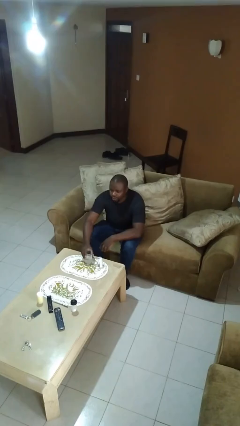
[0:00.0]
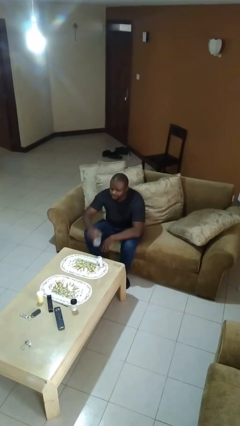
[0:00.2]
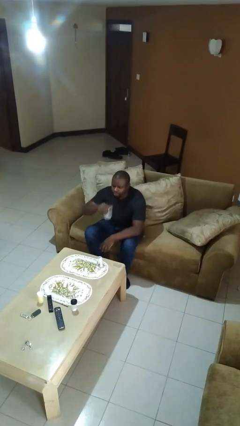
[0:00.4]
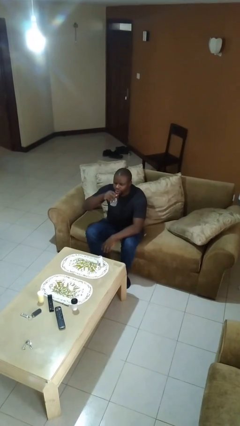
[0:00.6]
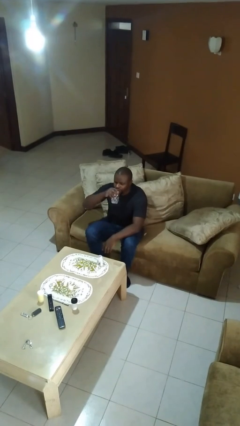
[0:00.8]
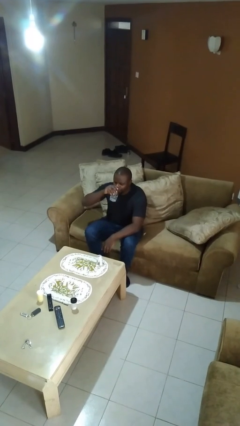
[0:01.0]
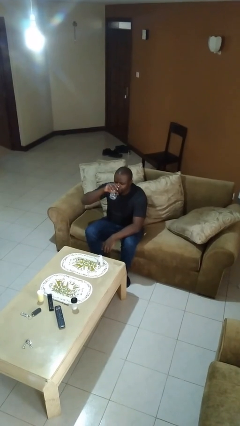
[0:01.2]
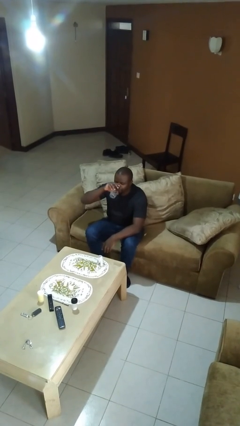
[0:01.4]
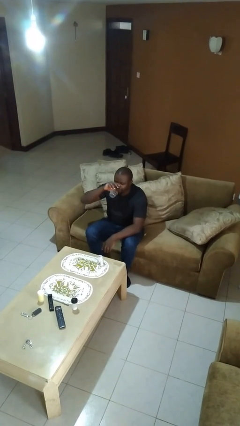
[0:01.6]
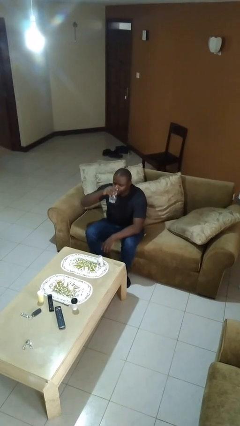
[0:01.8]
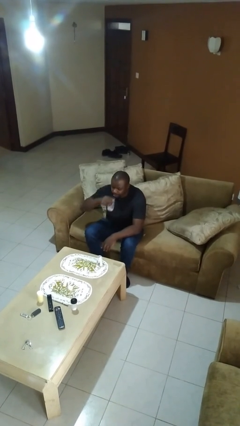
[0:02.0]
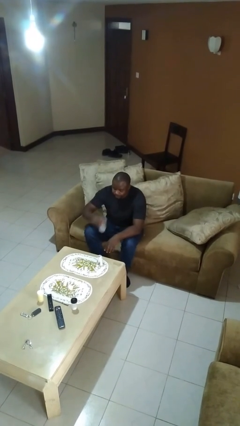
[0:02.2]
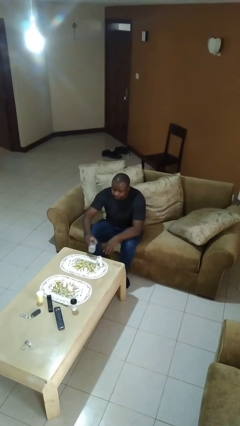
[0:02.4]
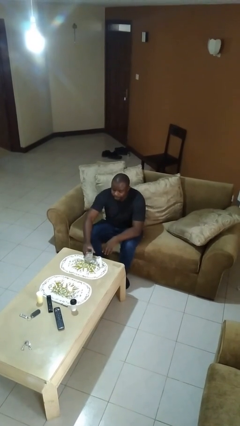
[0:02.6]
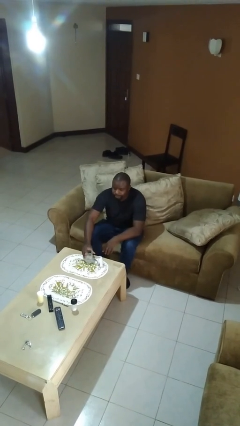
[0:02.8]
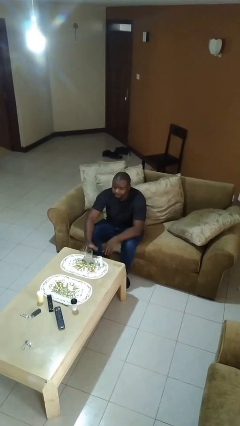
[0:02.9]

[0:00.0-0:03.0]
person drinks from cup

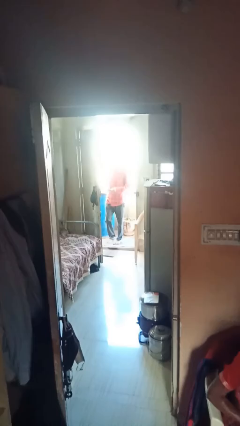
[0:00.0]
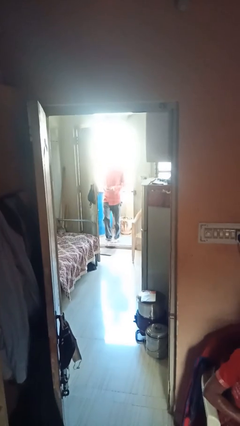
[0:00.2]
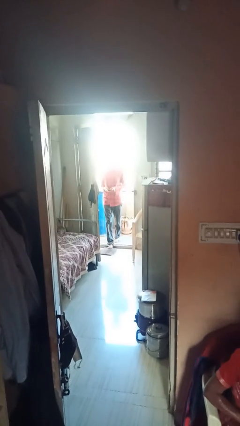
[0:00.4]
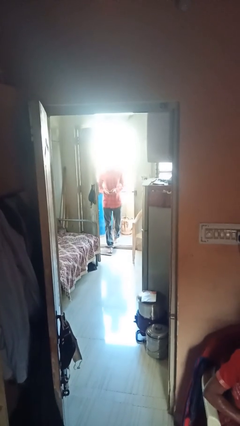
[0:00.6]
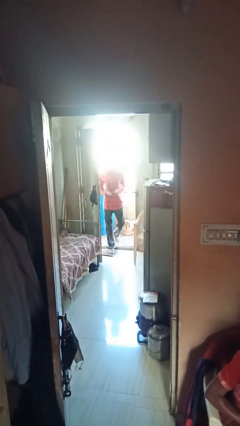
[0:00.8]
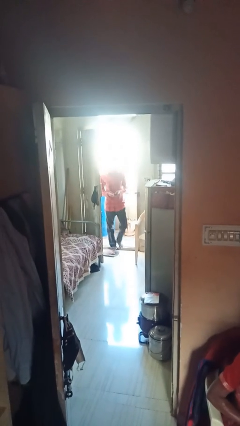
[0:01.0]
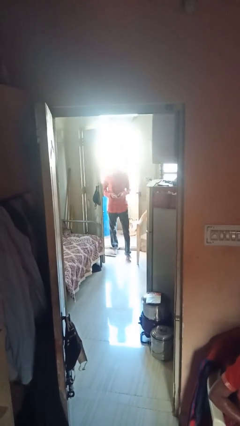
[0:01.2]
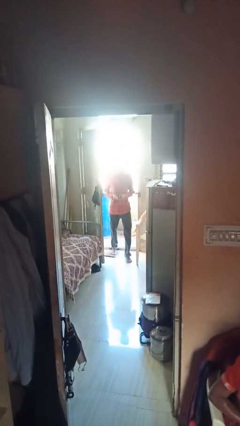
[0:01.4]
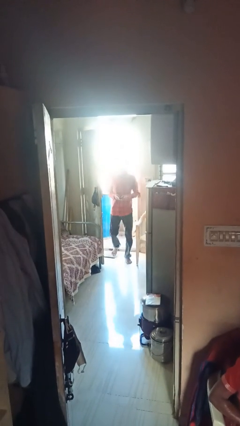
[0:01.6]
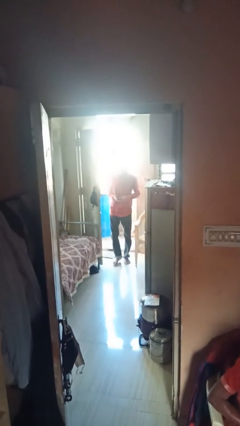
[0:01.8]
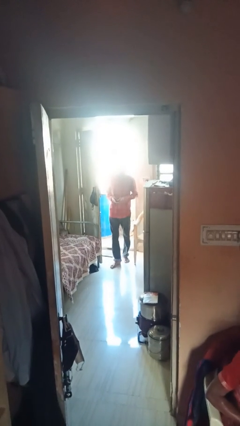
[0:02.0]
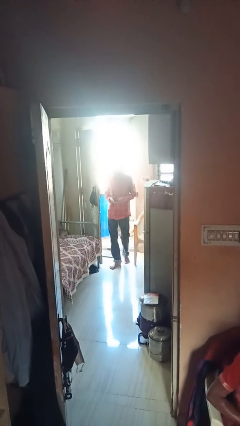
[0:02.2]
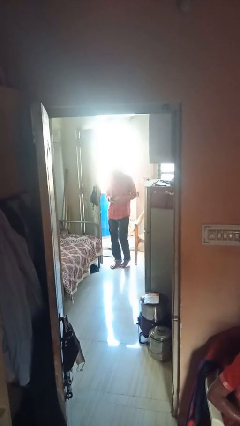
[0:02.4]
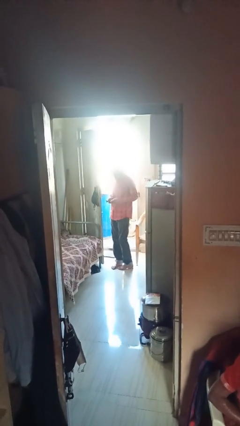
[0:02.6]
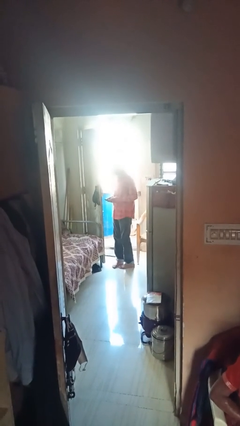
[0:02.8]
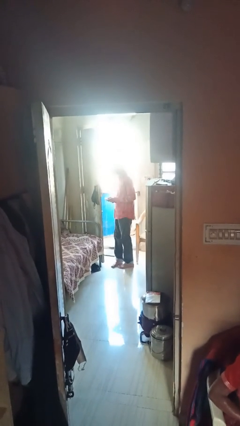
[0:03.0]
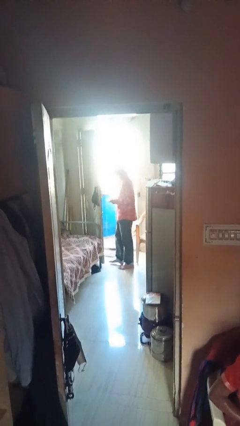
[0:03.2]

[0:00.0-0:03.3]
person enters scene through structure

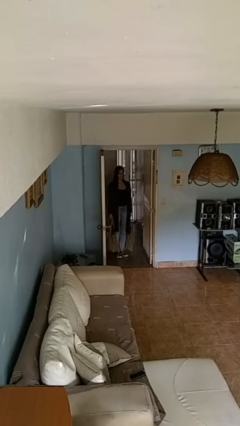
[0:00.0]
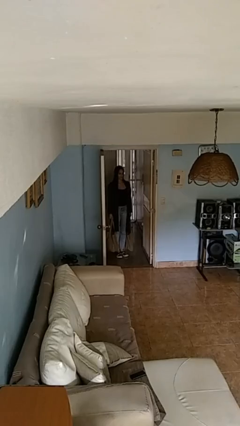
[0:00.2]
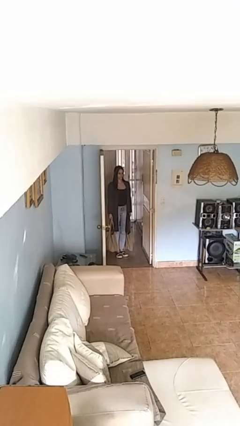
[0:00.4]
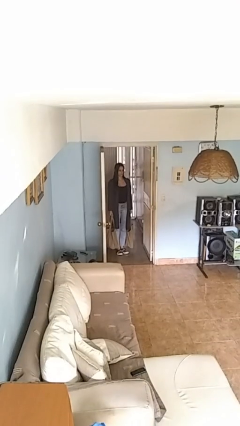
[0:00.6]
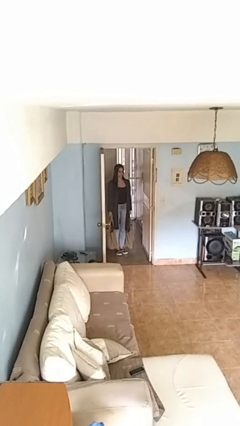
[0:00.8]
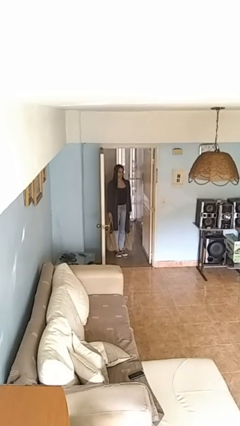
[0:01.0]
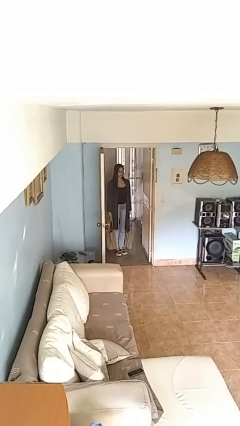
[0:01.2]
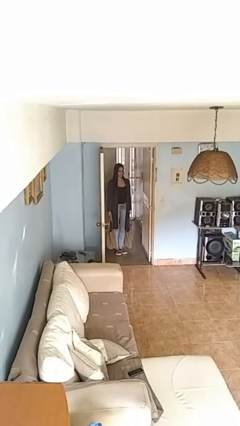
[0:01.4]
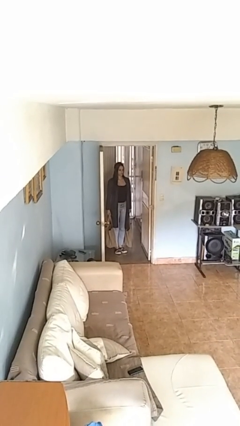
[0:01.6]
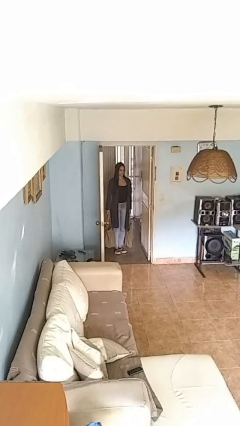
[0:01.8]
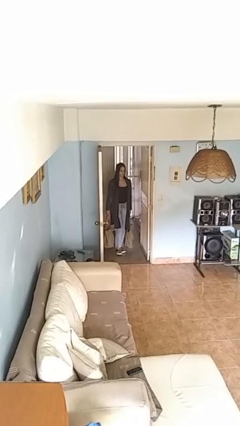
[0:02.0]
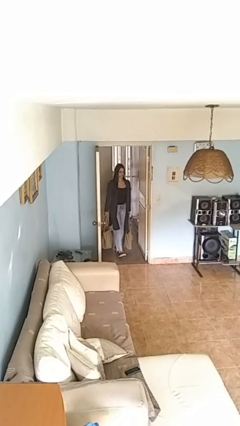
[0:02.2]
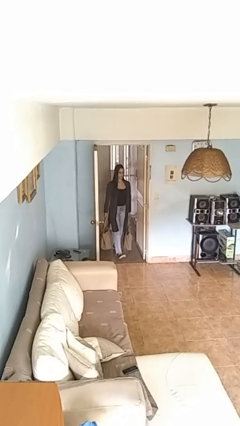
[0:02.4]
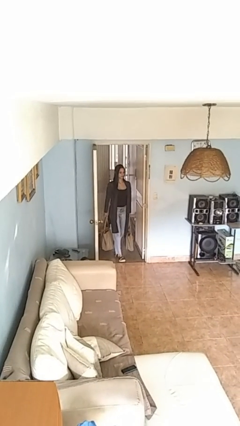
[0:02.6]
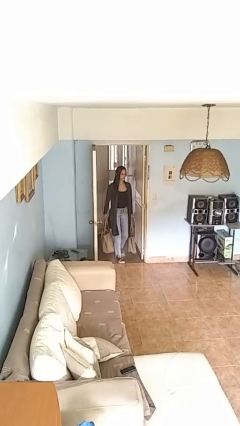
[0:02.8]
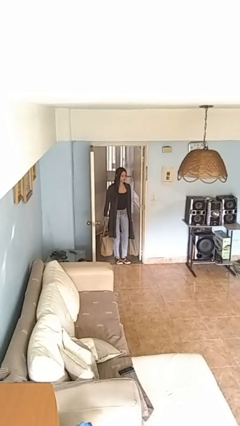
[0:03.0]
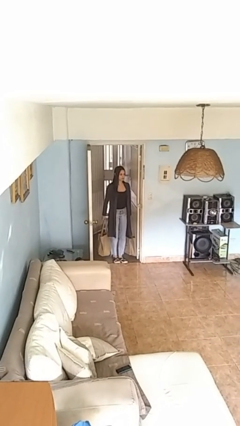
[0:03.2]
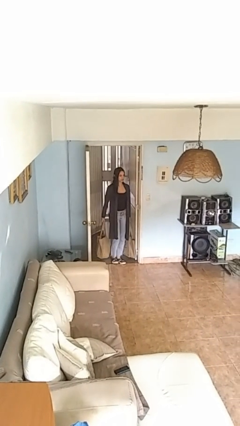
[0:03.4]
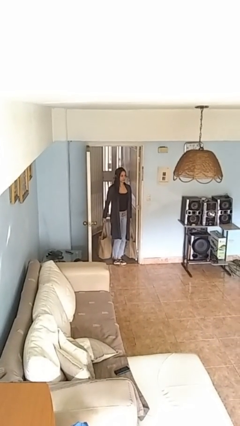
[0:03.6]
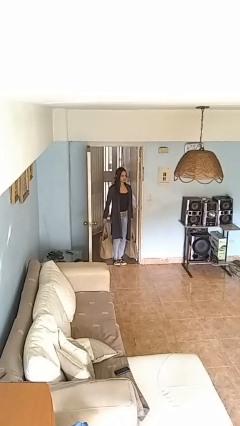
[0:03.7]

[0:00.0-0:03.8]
person carries groceries

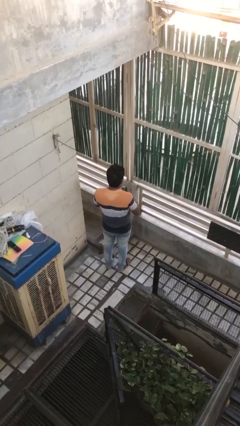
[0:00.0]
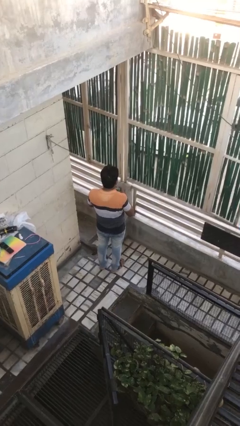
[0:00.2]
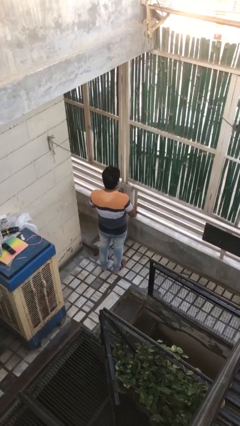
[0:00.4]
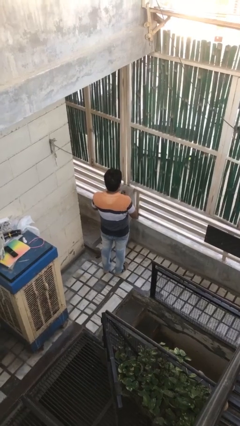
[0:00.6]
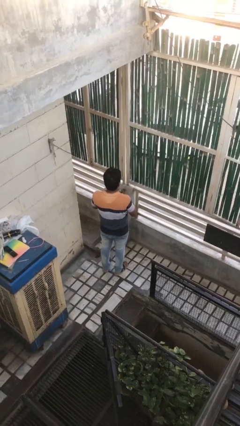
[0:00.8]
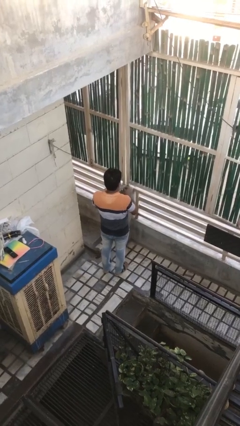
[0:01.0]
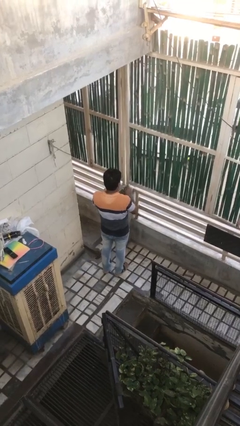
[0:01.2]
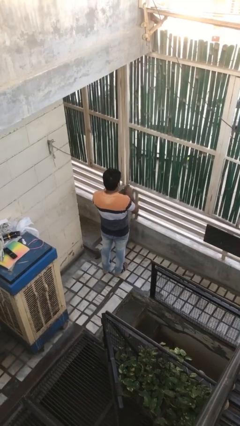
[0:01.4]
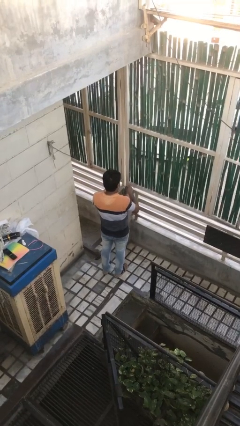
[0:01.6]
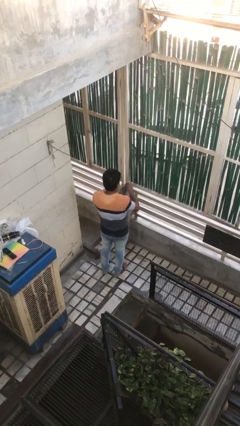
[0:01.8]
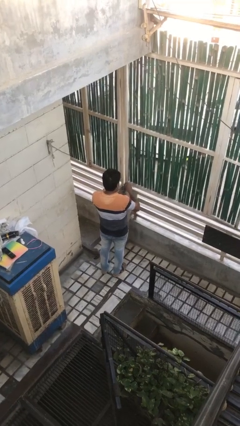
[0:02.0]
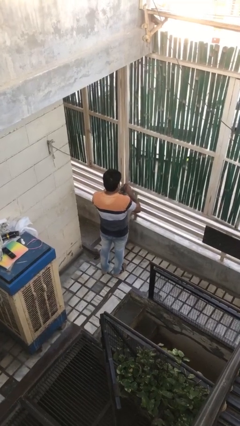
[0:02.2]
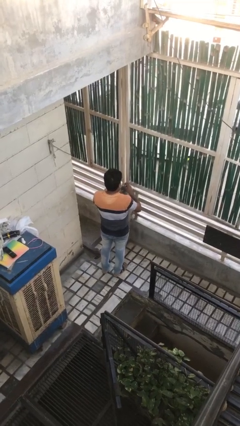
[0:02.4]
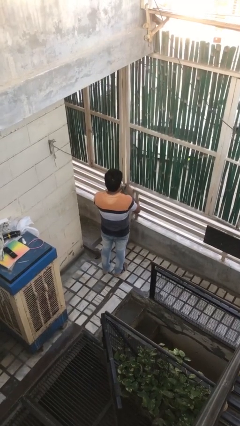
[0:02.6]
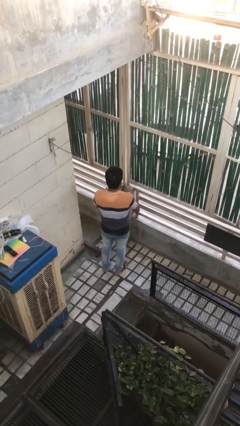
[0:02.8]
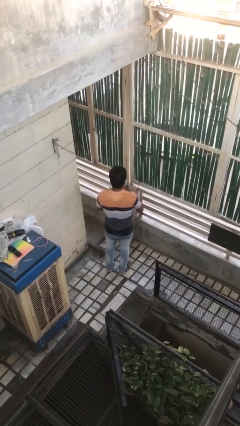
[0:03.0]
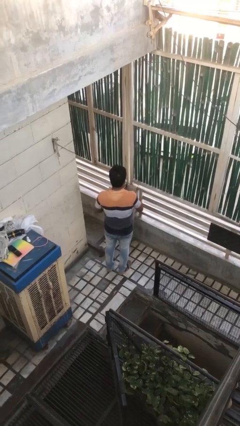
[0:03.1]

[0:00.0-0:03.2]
person opens beverage can

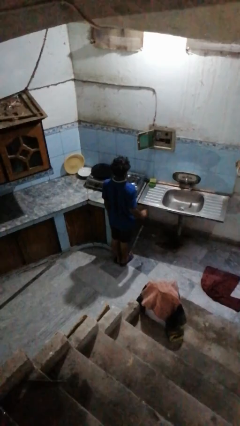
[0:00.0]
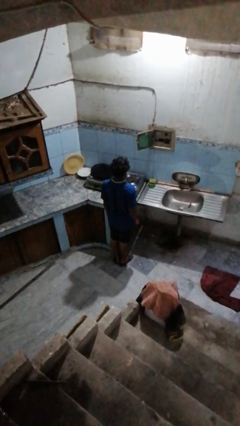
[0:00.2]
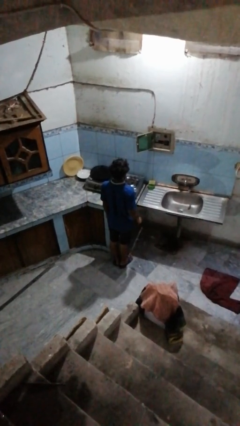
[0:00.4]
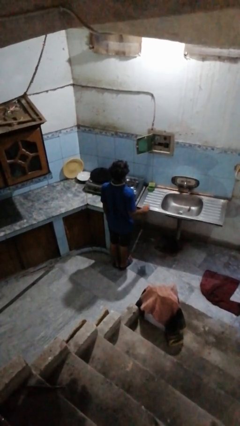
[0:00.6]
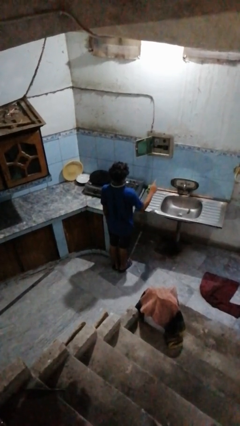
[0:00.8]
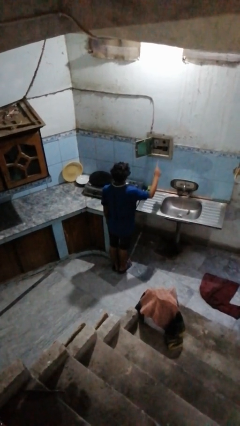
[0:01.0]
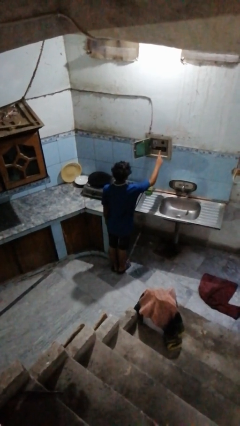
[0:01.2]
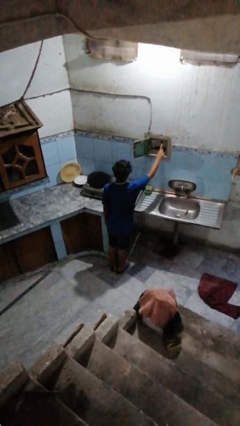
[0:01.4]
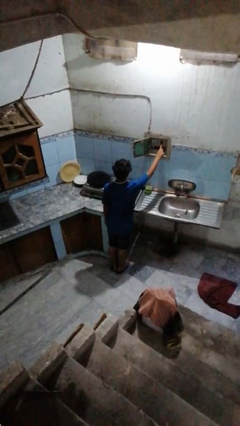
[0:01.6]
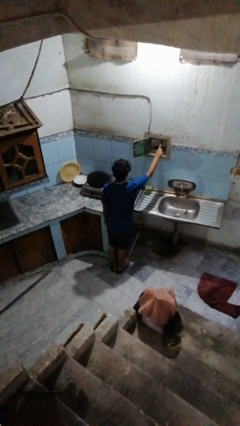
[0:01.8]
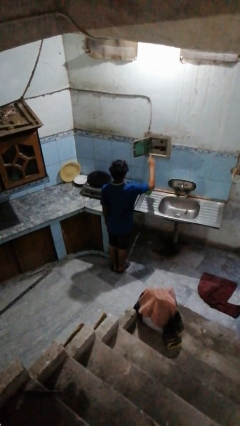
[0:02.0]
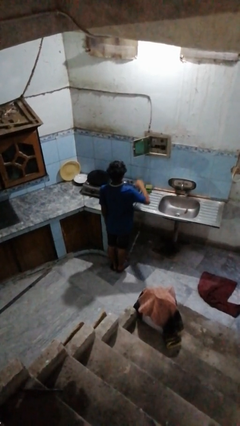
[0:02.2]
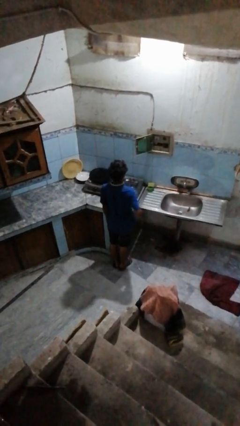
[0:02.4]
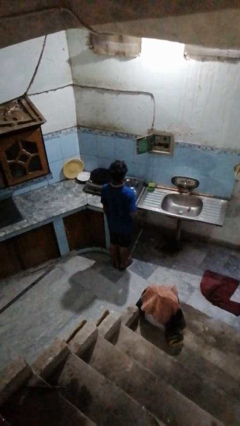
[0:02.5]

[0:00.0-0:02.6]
person takes down smoke detector

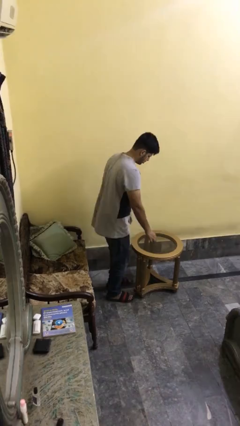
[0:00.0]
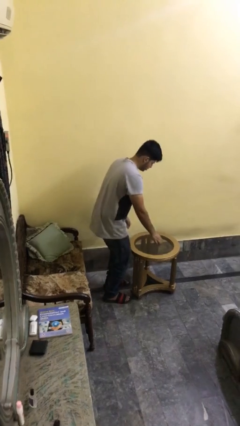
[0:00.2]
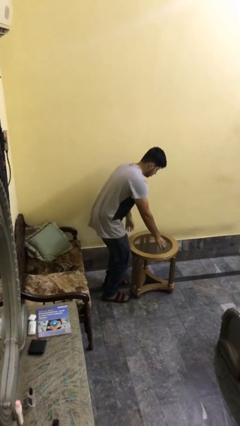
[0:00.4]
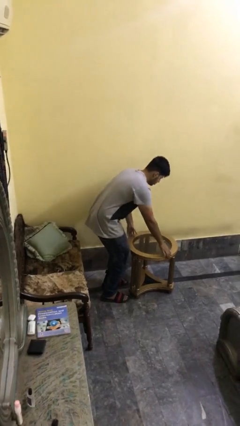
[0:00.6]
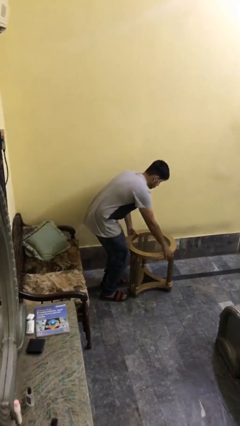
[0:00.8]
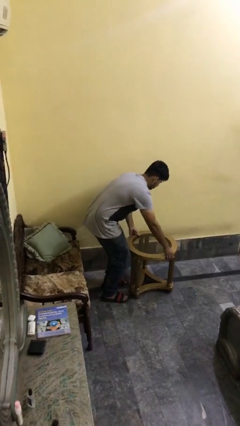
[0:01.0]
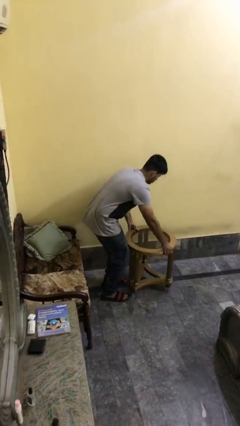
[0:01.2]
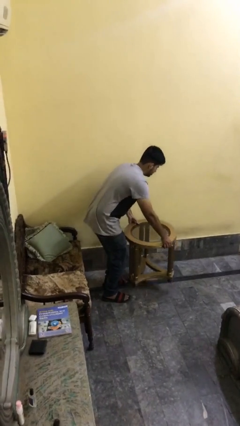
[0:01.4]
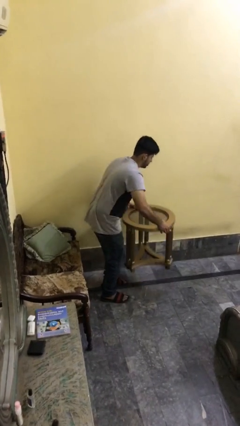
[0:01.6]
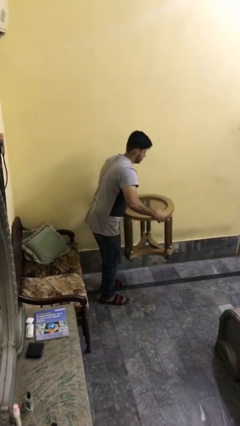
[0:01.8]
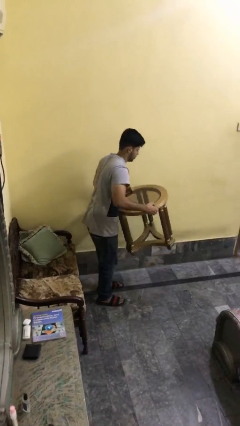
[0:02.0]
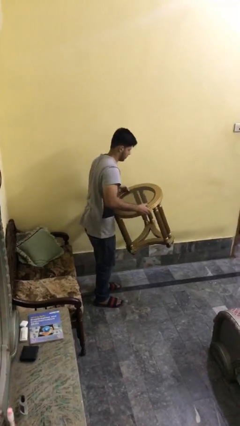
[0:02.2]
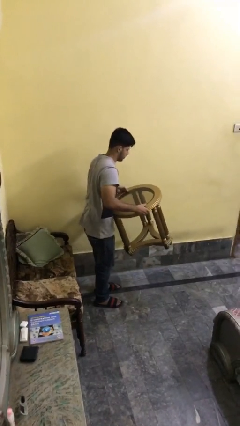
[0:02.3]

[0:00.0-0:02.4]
person picks up object from floor
